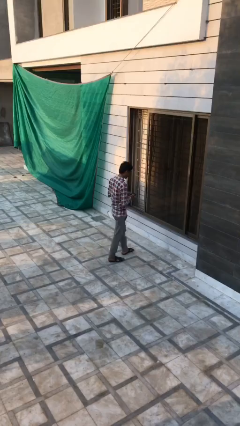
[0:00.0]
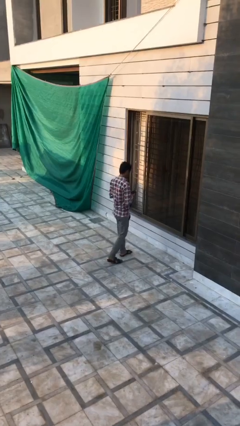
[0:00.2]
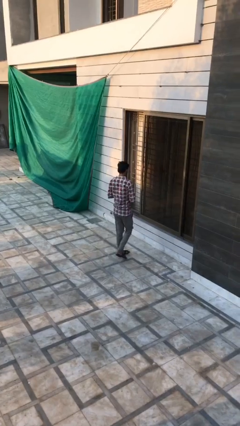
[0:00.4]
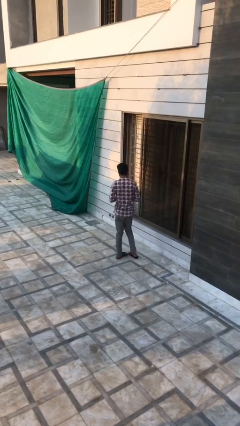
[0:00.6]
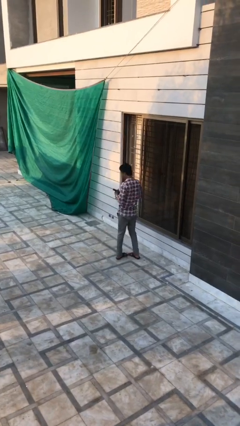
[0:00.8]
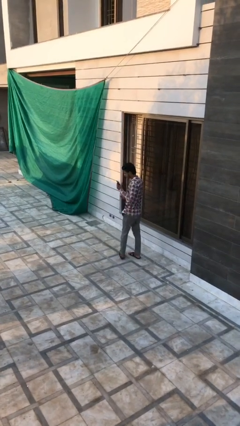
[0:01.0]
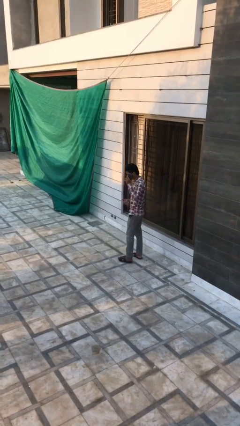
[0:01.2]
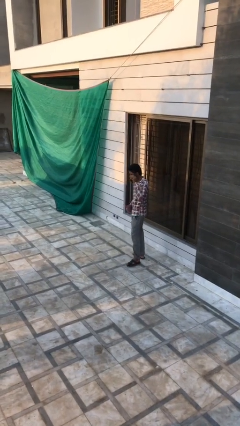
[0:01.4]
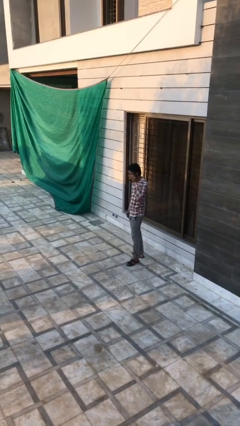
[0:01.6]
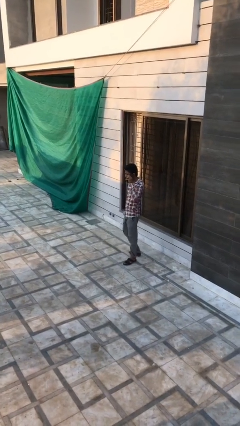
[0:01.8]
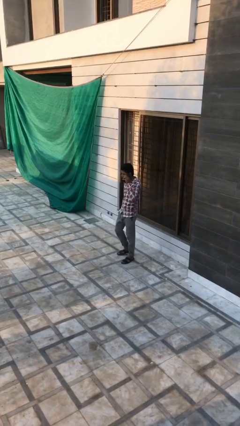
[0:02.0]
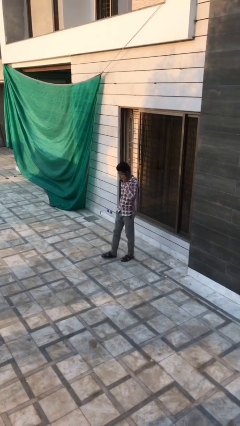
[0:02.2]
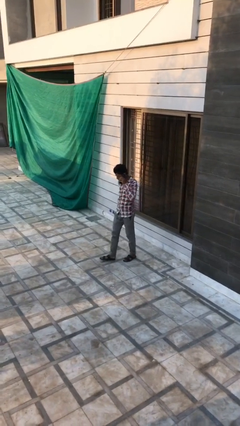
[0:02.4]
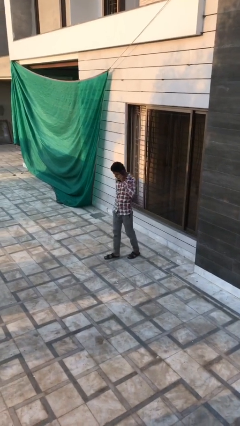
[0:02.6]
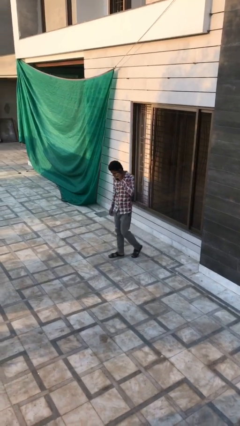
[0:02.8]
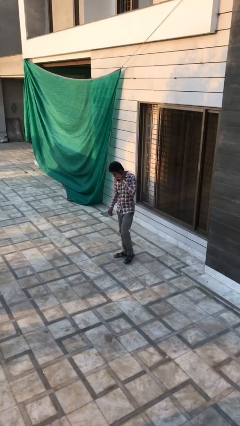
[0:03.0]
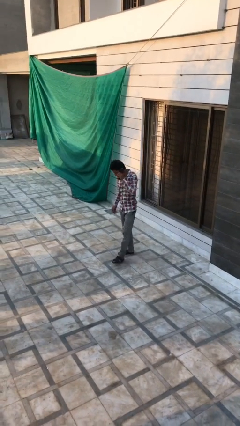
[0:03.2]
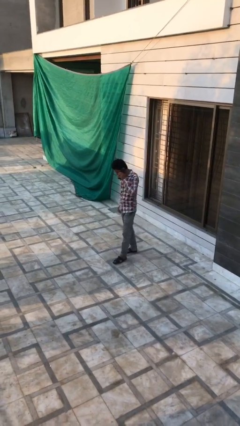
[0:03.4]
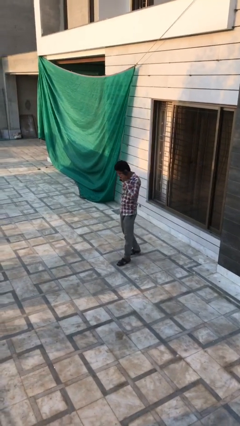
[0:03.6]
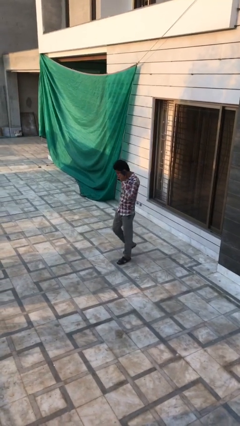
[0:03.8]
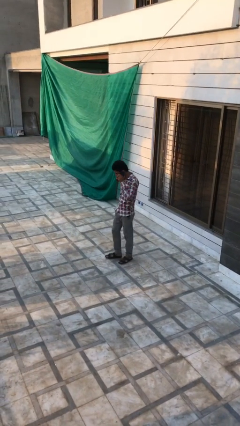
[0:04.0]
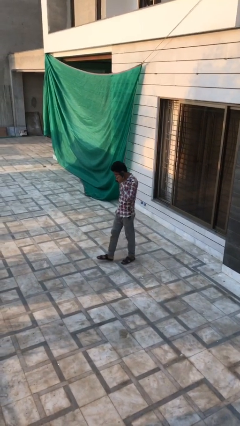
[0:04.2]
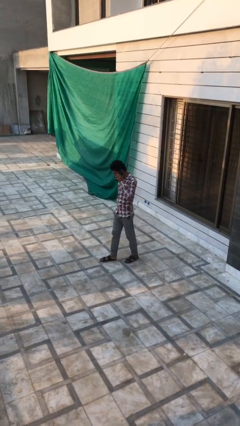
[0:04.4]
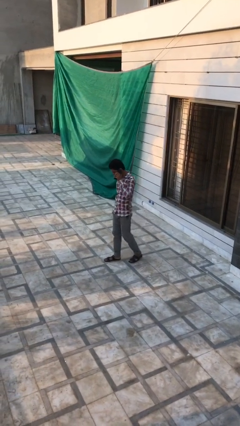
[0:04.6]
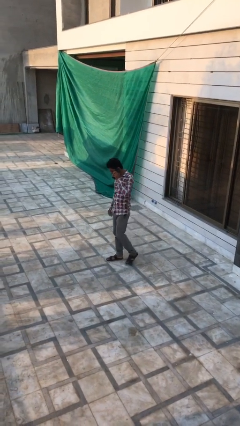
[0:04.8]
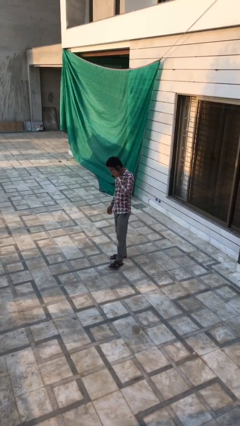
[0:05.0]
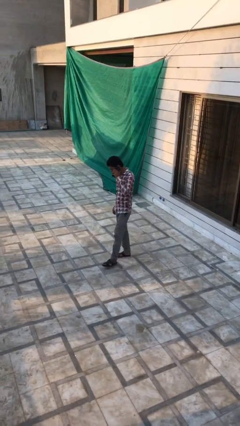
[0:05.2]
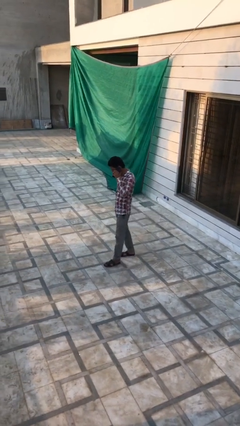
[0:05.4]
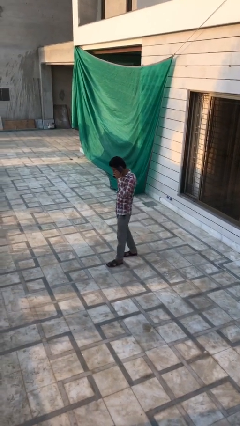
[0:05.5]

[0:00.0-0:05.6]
person talks on phone

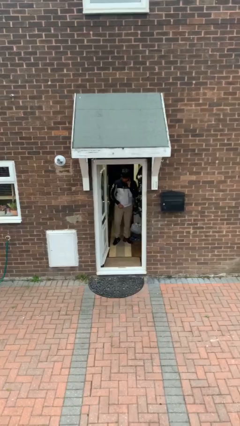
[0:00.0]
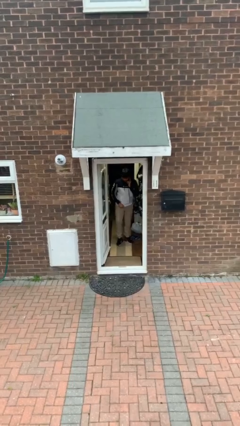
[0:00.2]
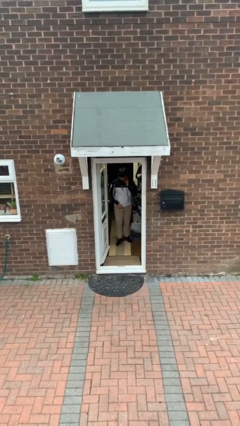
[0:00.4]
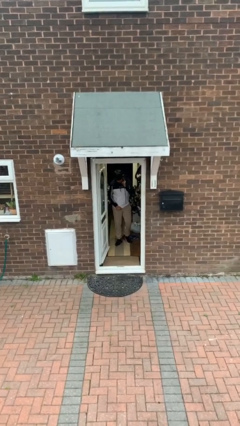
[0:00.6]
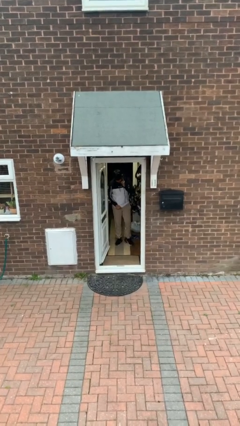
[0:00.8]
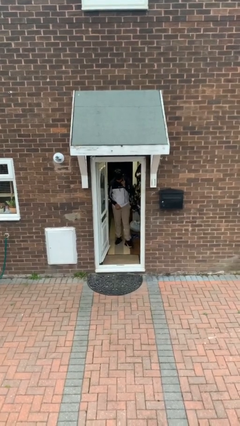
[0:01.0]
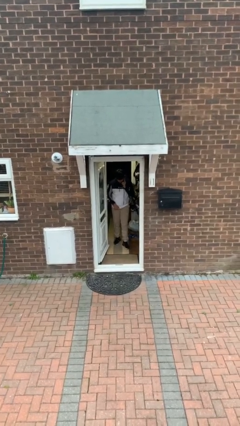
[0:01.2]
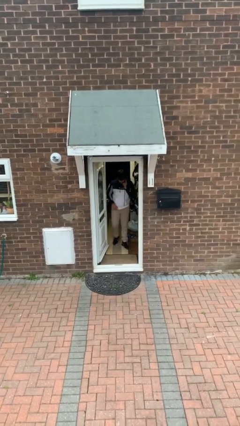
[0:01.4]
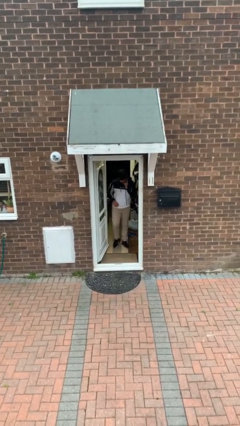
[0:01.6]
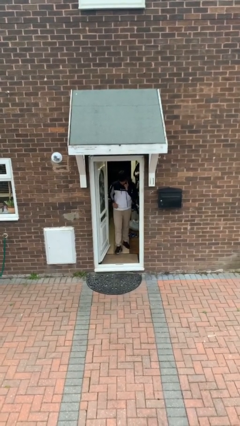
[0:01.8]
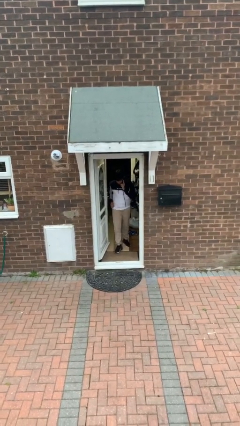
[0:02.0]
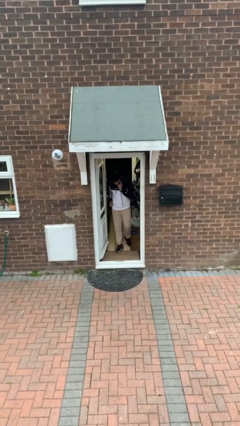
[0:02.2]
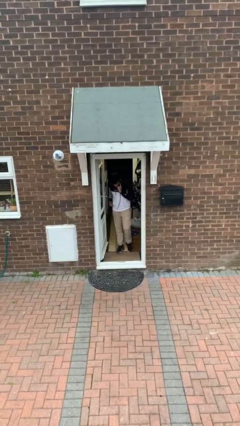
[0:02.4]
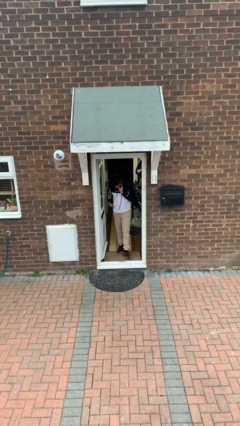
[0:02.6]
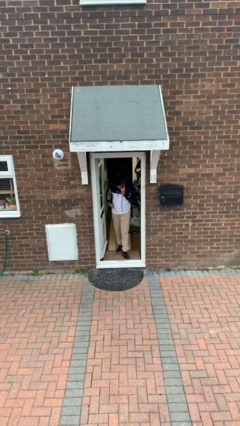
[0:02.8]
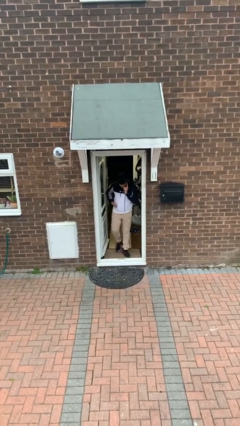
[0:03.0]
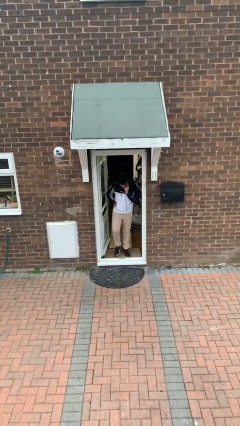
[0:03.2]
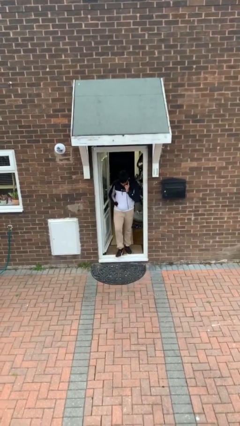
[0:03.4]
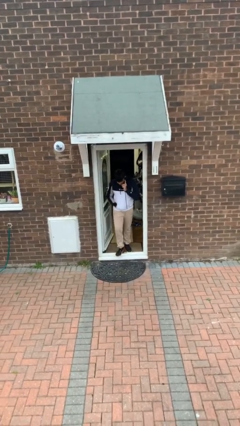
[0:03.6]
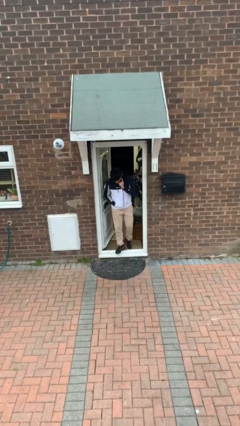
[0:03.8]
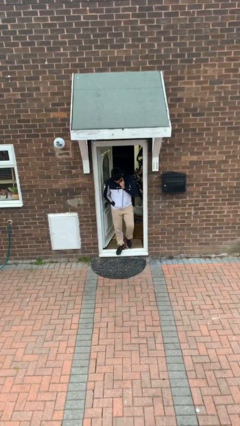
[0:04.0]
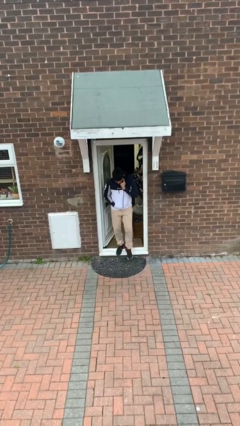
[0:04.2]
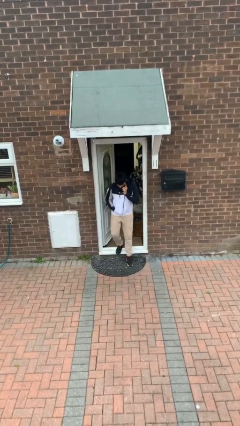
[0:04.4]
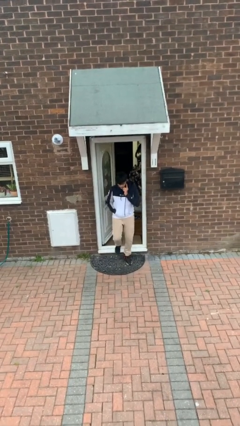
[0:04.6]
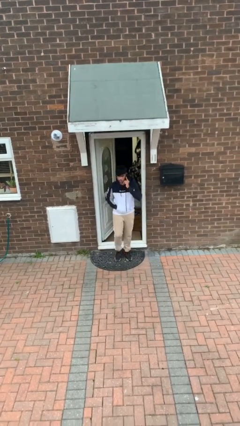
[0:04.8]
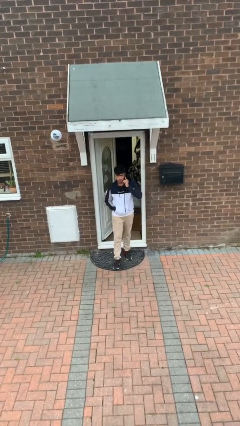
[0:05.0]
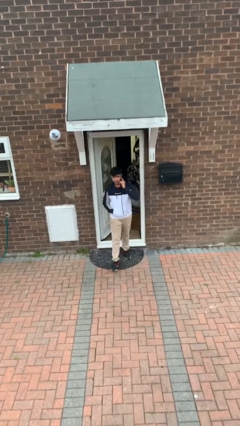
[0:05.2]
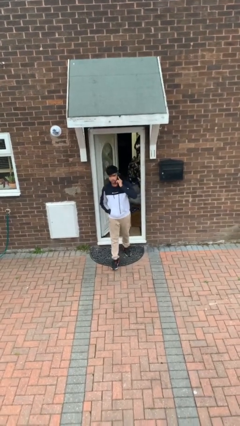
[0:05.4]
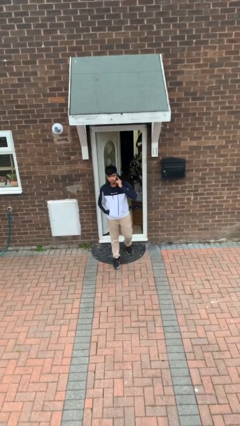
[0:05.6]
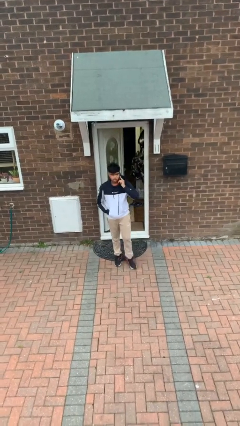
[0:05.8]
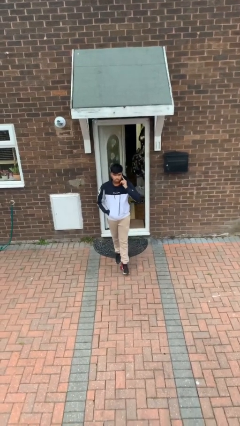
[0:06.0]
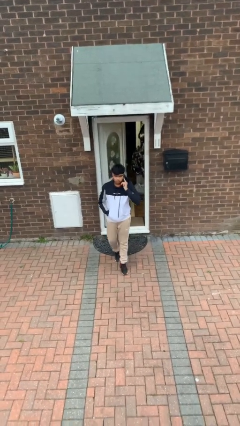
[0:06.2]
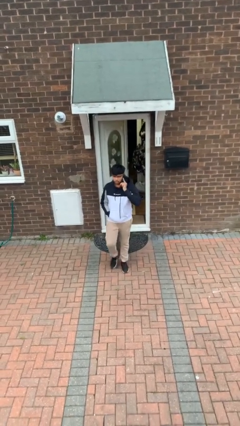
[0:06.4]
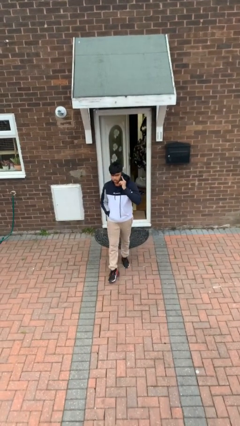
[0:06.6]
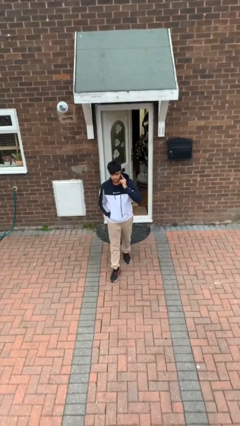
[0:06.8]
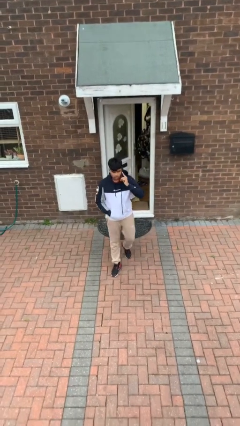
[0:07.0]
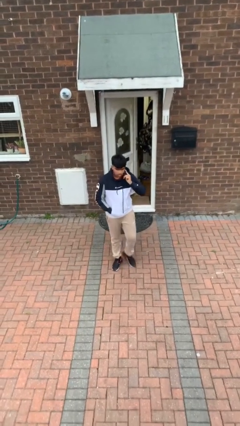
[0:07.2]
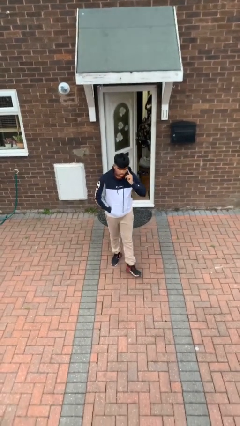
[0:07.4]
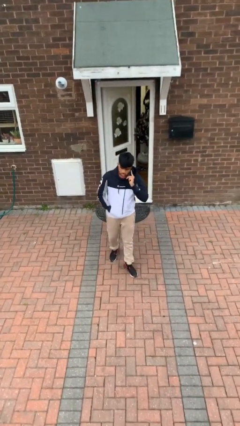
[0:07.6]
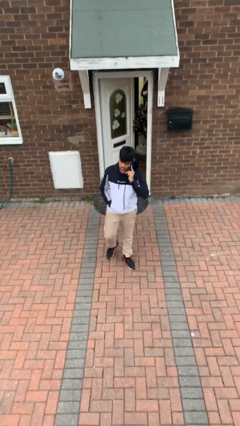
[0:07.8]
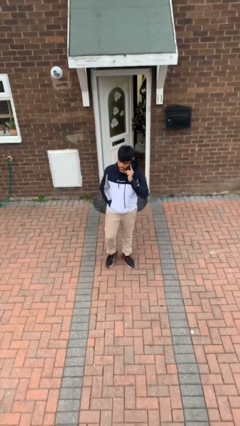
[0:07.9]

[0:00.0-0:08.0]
person enters scene through structure

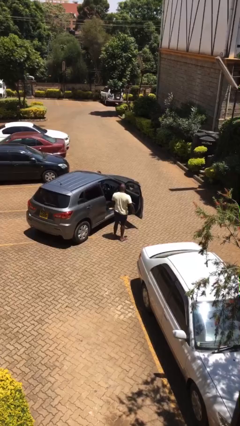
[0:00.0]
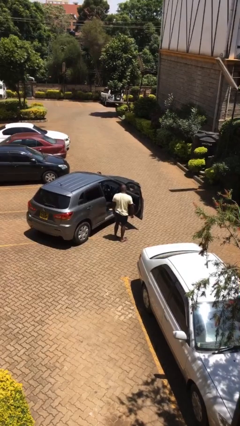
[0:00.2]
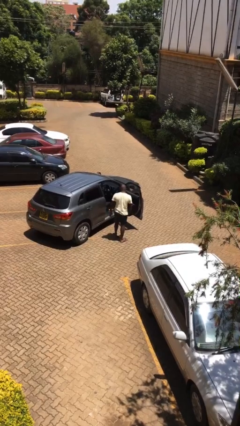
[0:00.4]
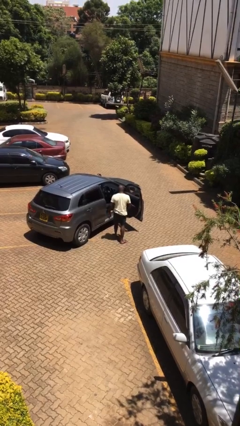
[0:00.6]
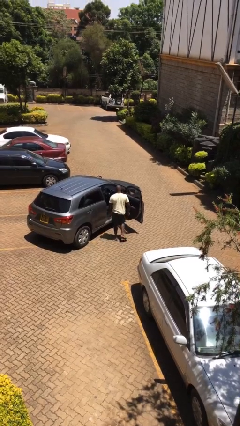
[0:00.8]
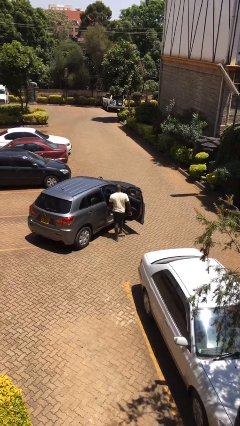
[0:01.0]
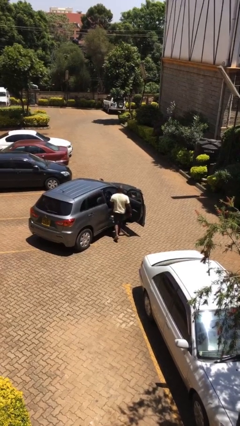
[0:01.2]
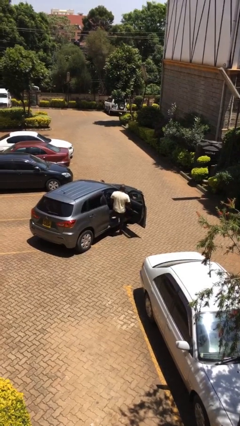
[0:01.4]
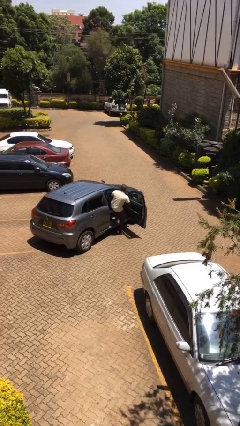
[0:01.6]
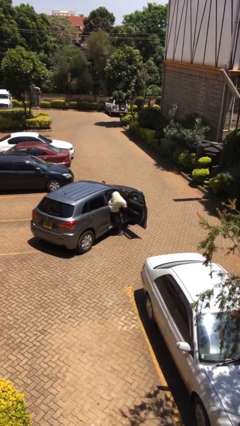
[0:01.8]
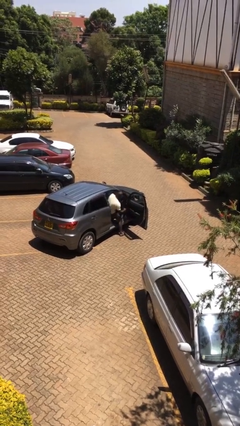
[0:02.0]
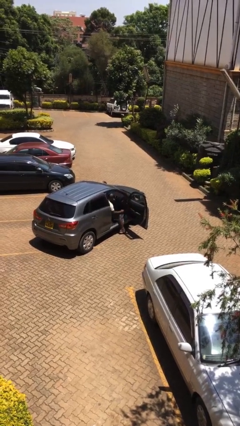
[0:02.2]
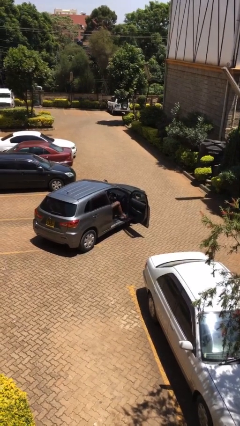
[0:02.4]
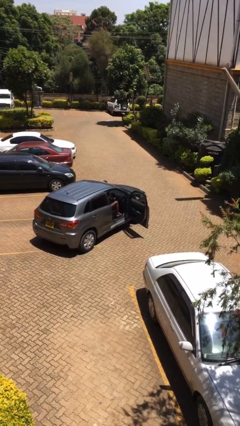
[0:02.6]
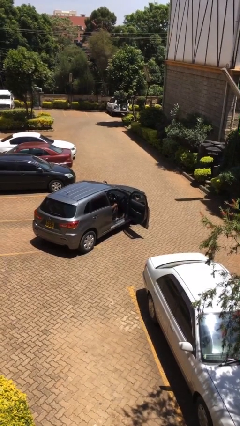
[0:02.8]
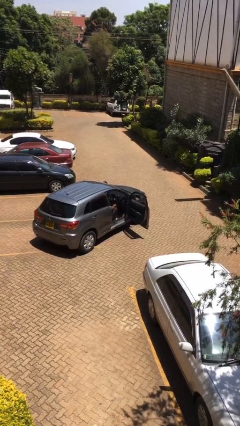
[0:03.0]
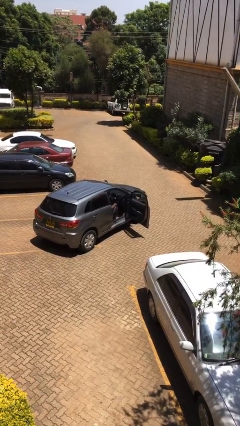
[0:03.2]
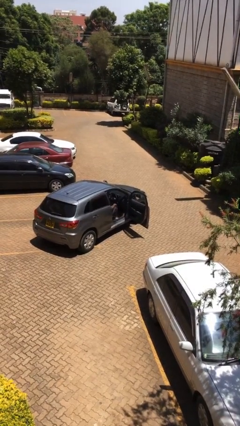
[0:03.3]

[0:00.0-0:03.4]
person enters car

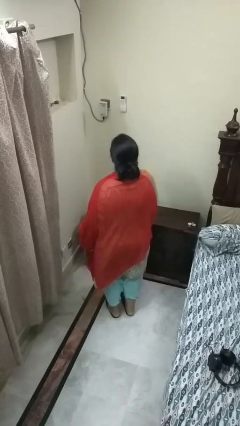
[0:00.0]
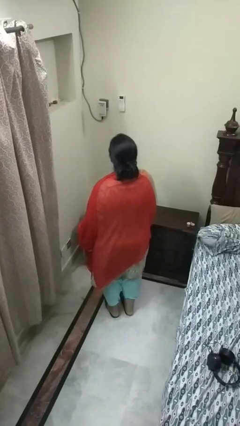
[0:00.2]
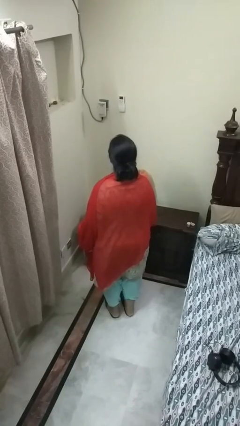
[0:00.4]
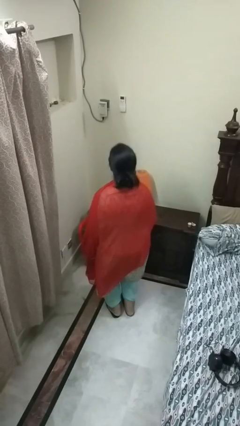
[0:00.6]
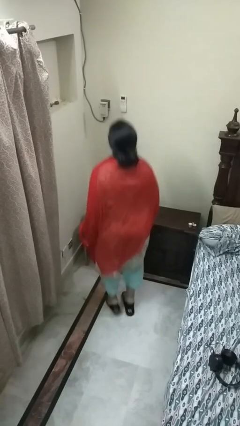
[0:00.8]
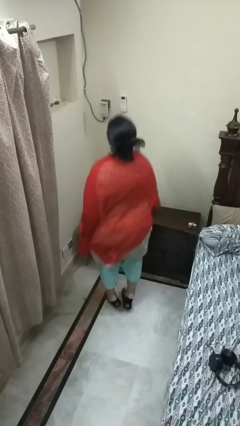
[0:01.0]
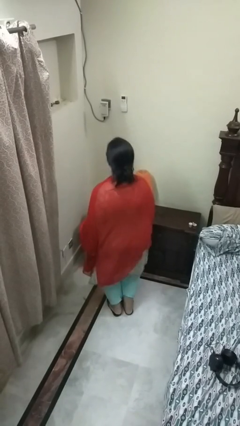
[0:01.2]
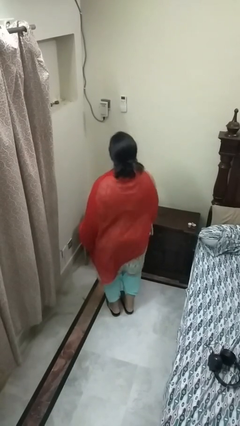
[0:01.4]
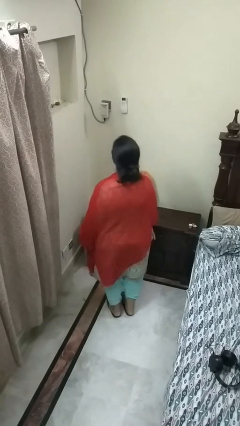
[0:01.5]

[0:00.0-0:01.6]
person jumps
